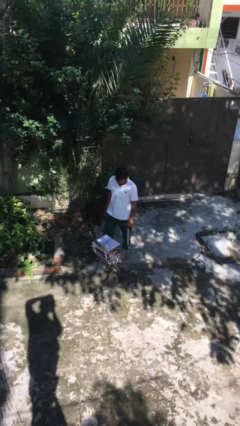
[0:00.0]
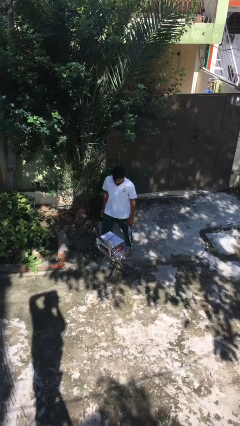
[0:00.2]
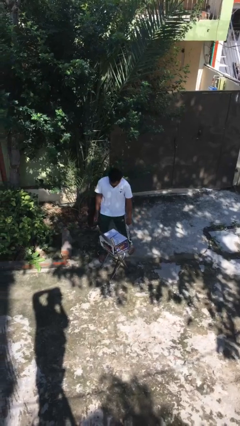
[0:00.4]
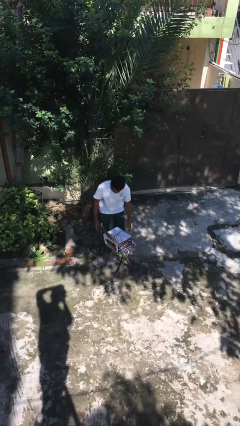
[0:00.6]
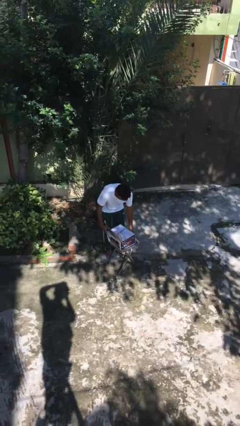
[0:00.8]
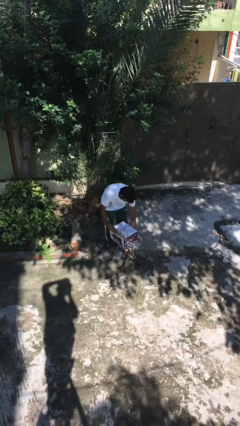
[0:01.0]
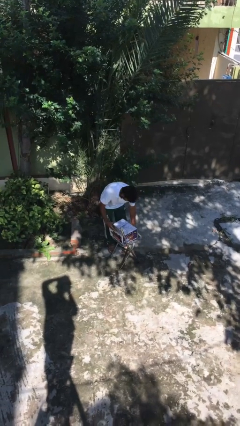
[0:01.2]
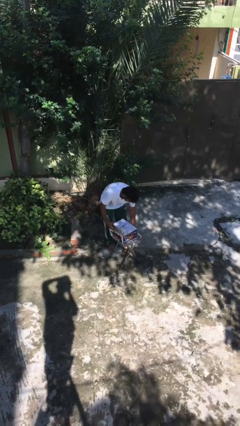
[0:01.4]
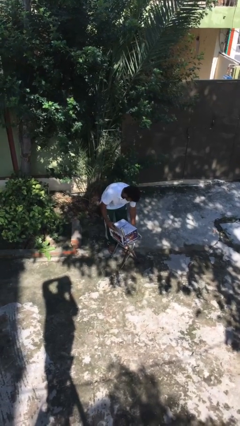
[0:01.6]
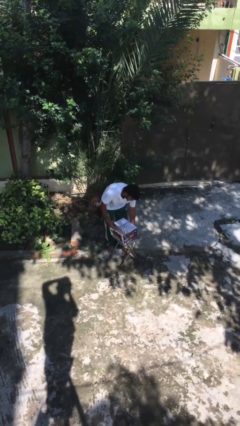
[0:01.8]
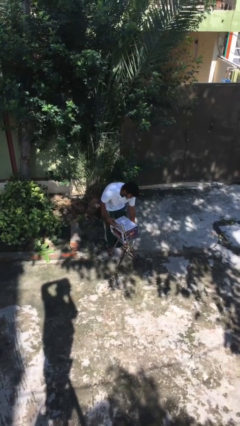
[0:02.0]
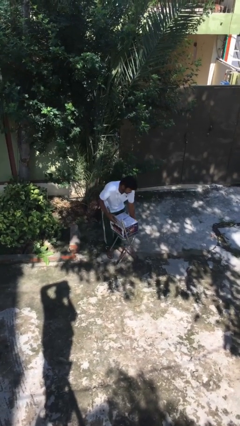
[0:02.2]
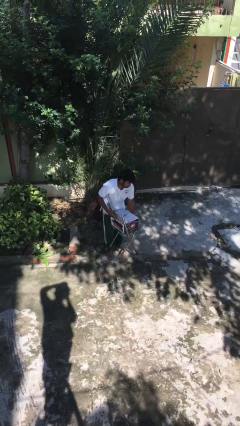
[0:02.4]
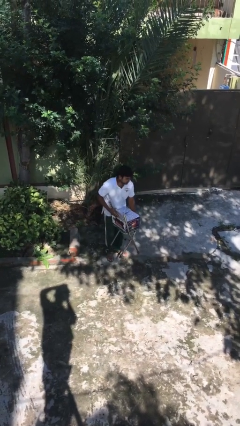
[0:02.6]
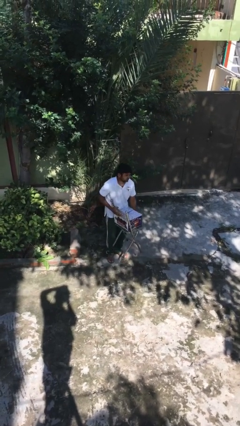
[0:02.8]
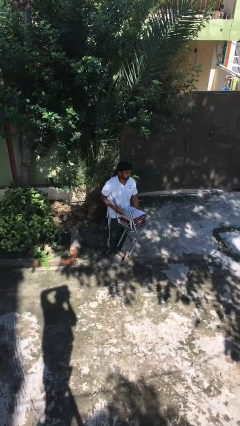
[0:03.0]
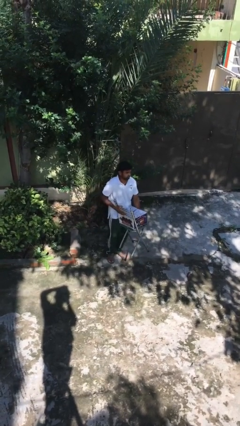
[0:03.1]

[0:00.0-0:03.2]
person picks up object from floor

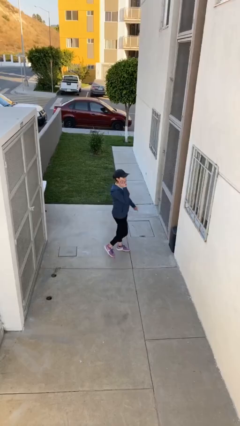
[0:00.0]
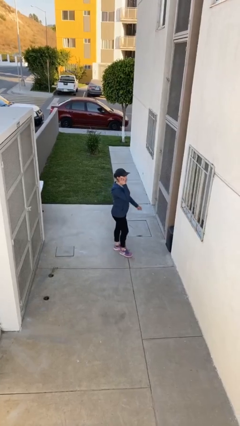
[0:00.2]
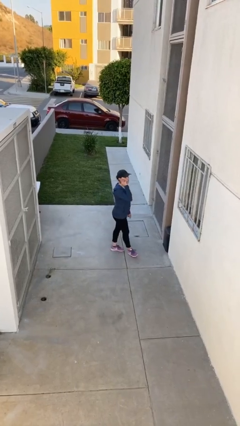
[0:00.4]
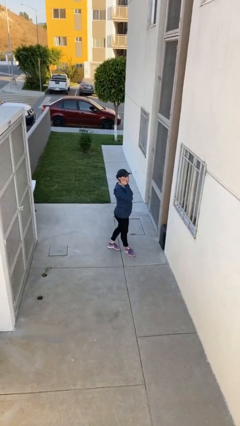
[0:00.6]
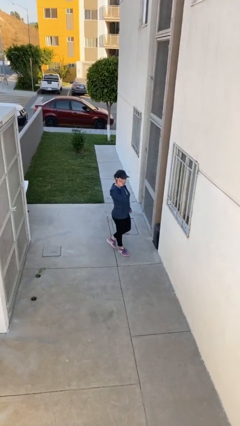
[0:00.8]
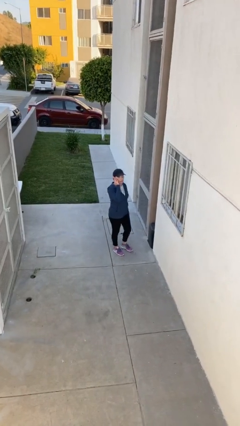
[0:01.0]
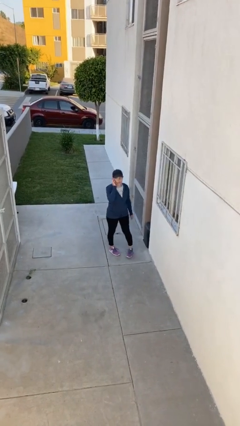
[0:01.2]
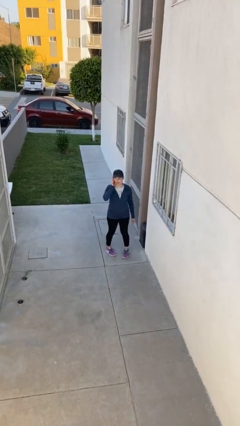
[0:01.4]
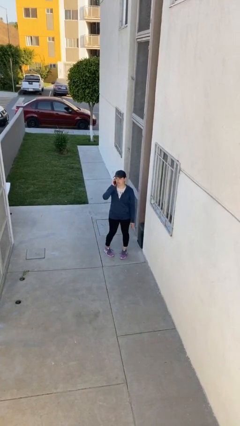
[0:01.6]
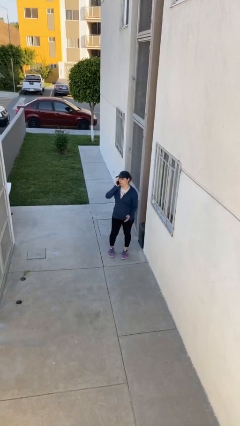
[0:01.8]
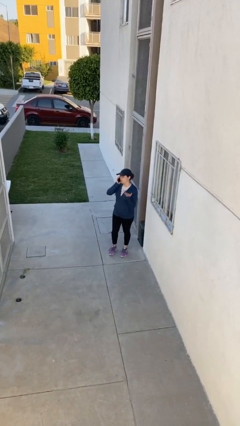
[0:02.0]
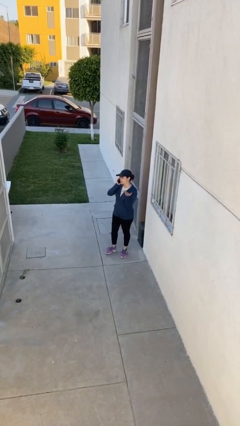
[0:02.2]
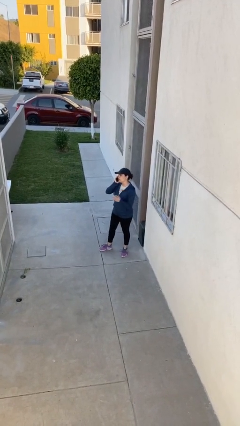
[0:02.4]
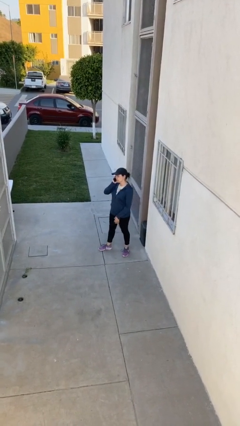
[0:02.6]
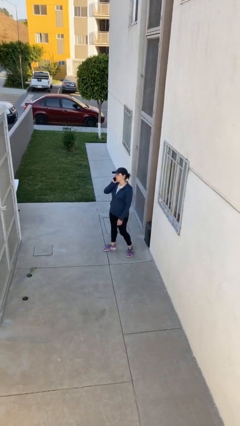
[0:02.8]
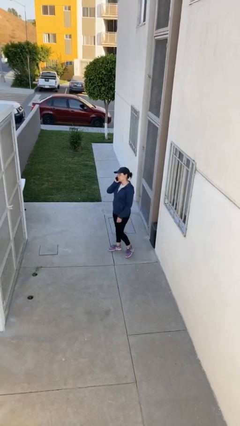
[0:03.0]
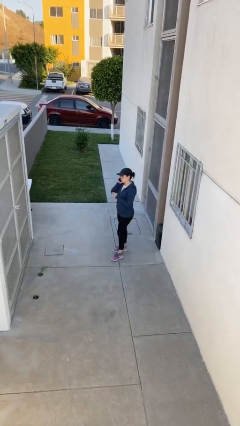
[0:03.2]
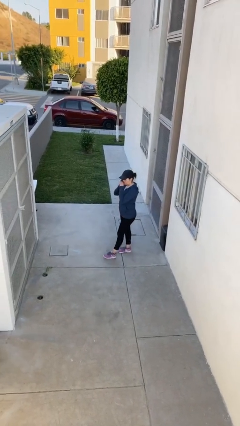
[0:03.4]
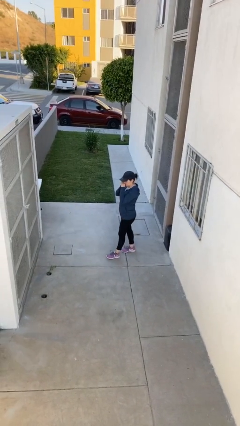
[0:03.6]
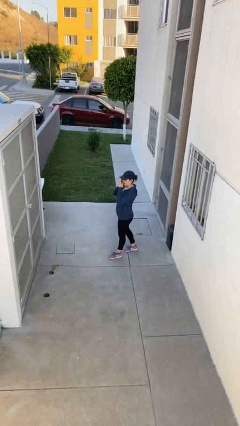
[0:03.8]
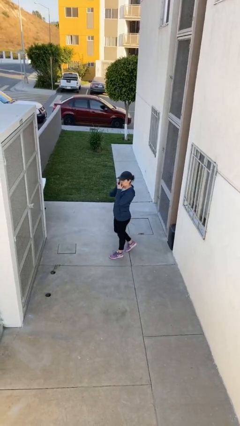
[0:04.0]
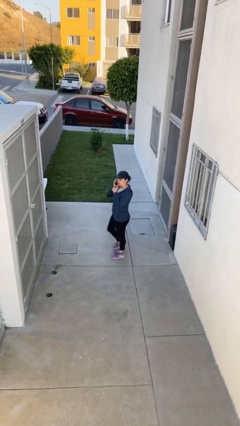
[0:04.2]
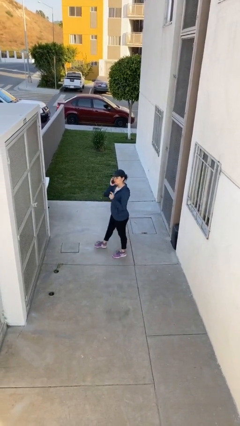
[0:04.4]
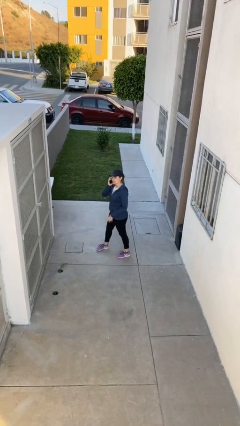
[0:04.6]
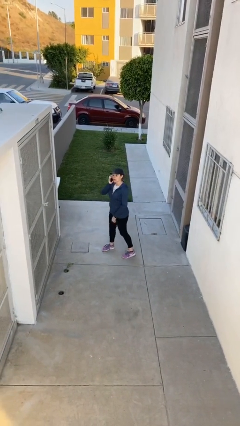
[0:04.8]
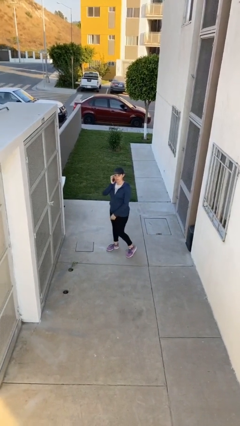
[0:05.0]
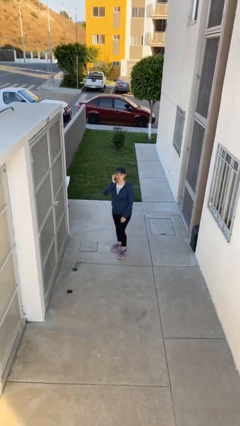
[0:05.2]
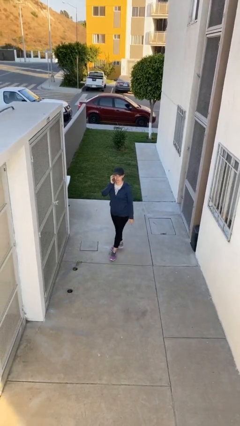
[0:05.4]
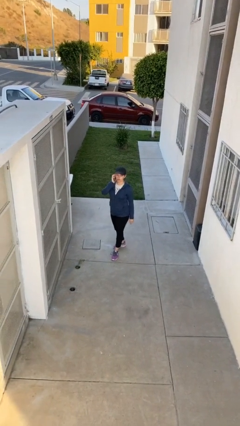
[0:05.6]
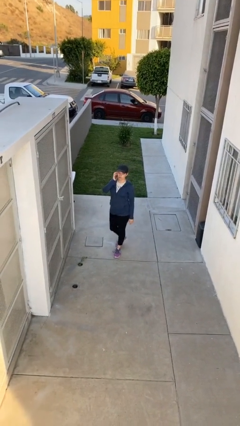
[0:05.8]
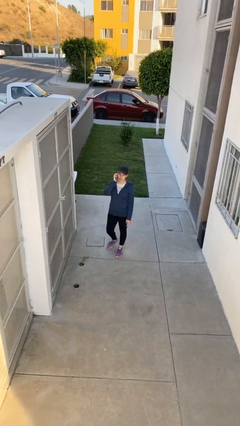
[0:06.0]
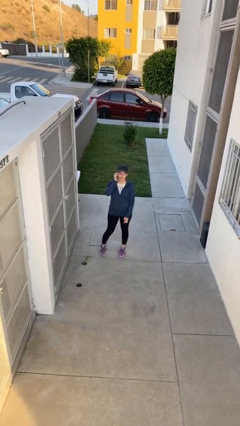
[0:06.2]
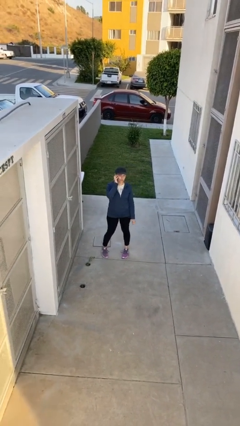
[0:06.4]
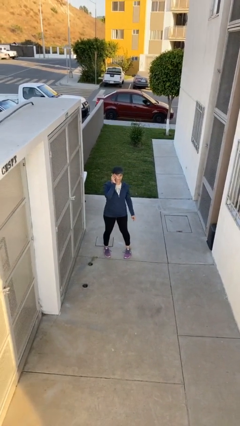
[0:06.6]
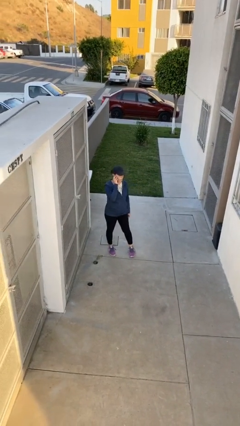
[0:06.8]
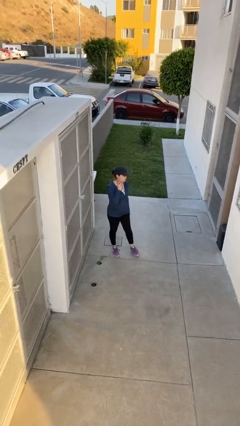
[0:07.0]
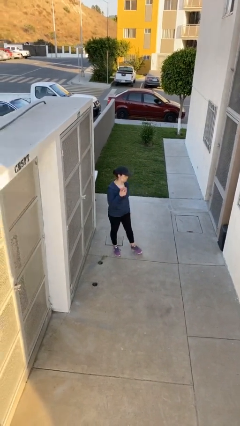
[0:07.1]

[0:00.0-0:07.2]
person talks on phone

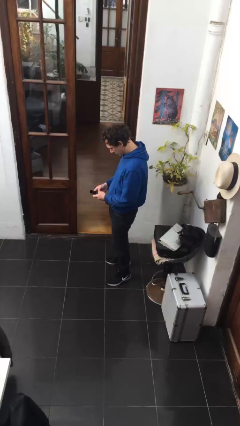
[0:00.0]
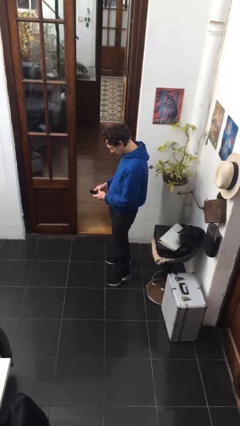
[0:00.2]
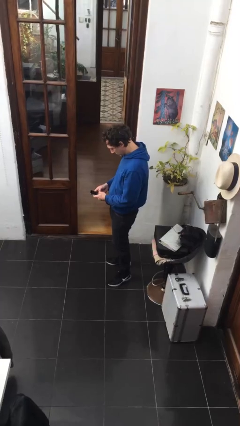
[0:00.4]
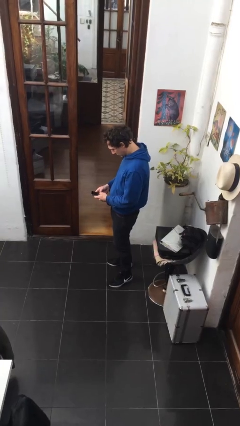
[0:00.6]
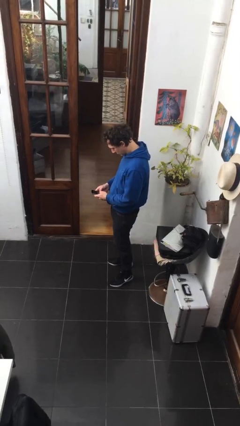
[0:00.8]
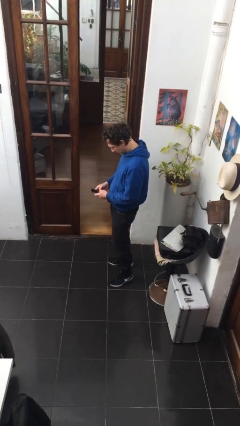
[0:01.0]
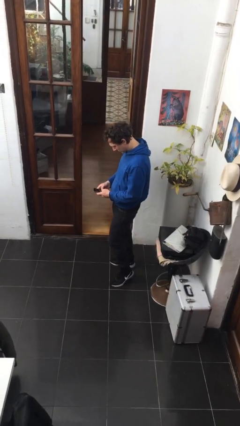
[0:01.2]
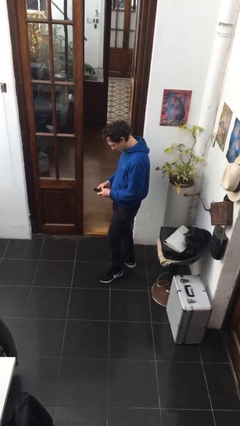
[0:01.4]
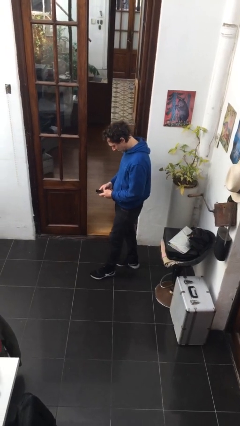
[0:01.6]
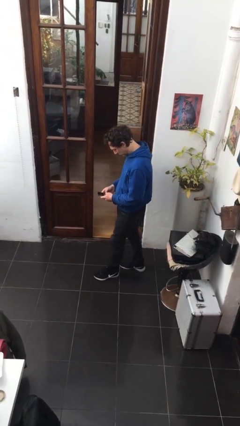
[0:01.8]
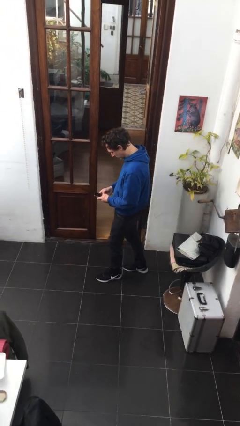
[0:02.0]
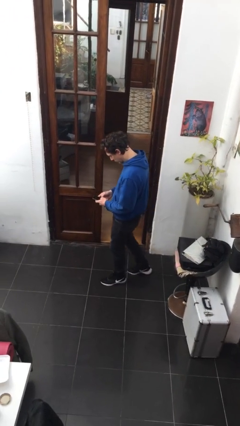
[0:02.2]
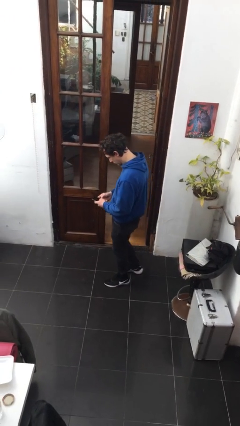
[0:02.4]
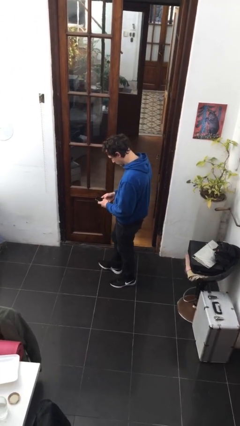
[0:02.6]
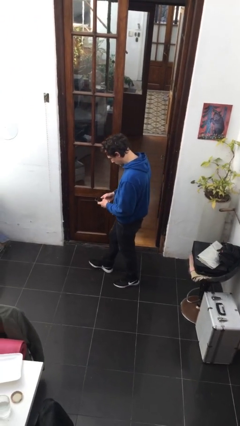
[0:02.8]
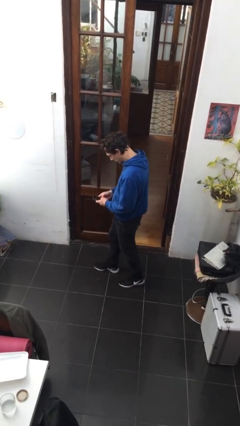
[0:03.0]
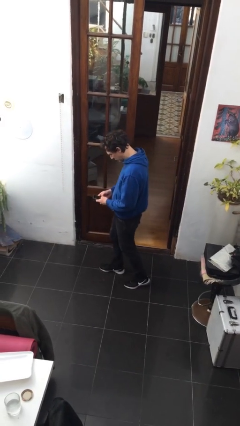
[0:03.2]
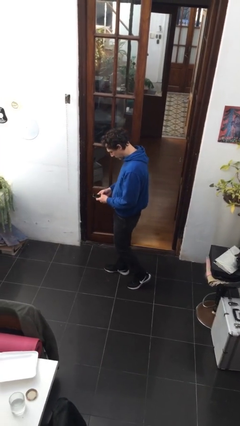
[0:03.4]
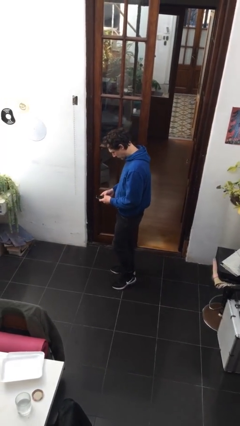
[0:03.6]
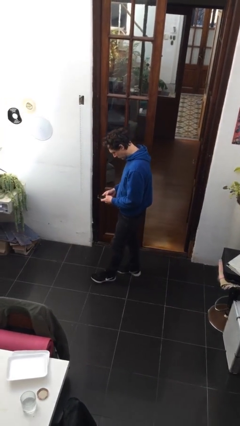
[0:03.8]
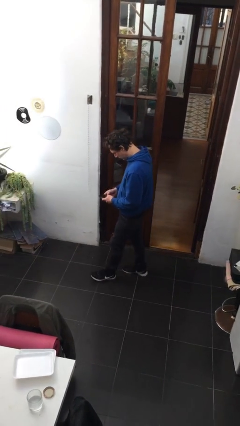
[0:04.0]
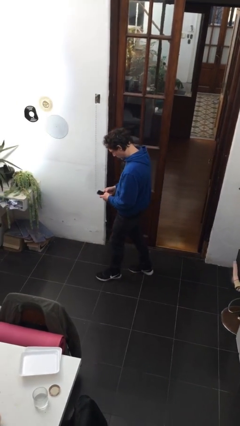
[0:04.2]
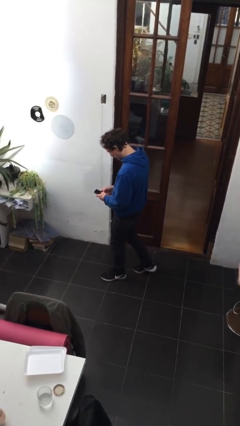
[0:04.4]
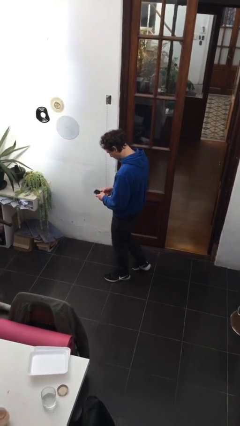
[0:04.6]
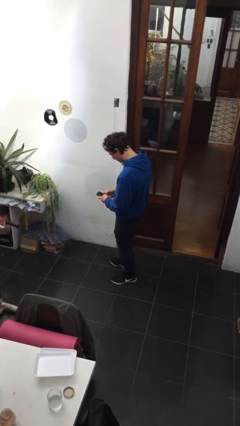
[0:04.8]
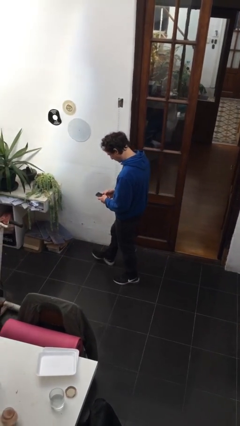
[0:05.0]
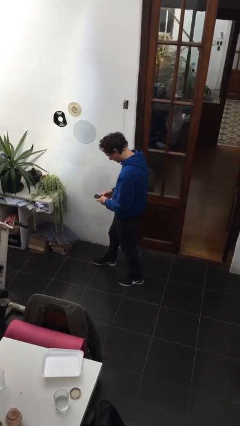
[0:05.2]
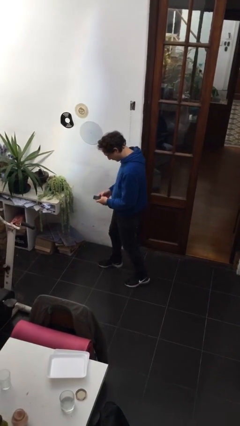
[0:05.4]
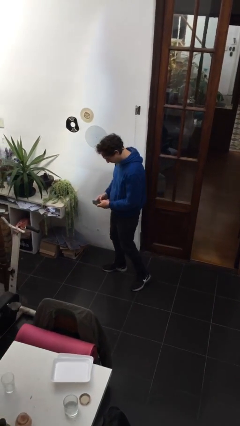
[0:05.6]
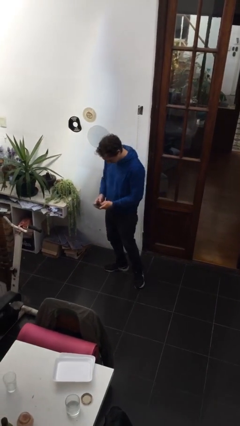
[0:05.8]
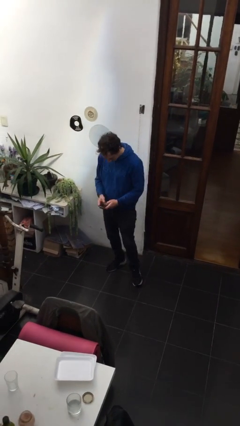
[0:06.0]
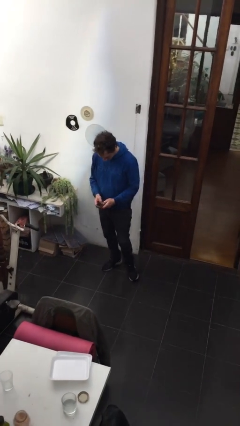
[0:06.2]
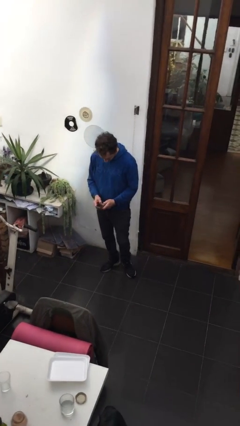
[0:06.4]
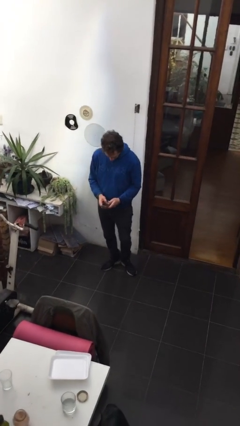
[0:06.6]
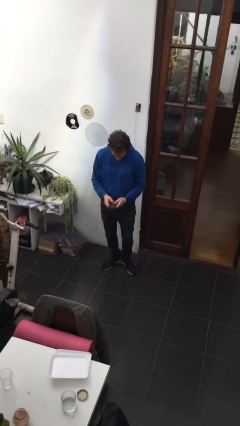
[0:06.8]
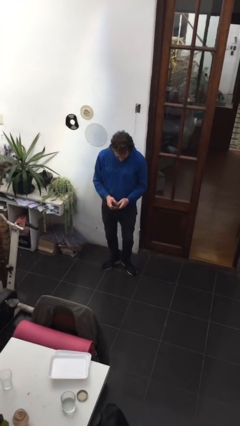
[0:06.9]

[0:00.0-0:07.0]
person texts on phone

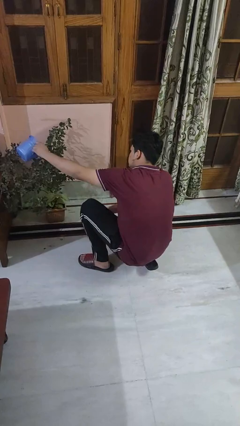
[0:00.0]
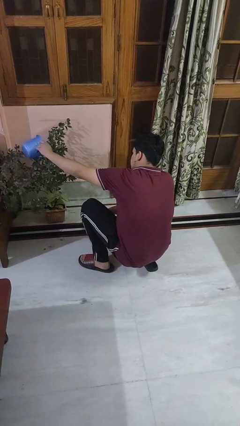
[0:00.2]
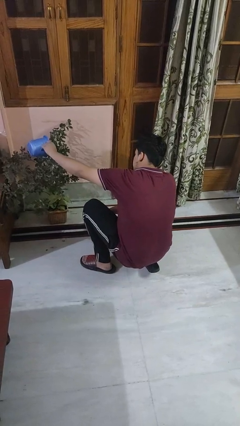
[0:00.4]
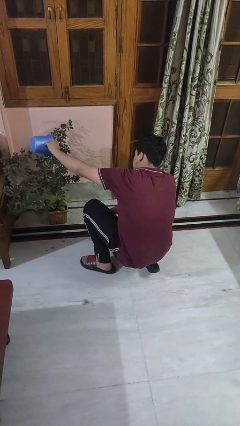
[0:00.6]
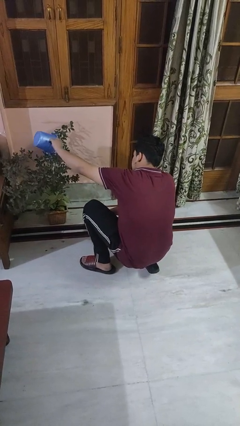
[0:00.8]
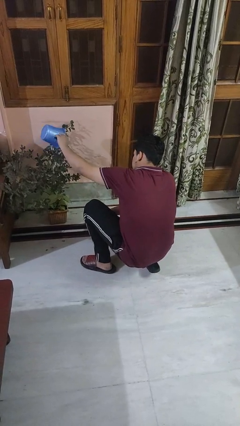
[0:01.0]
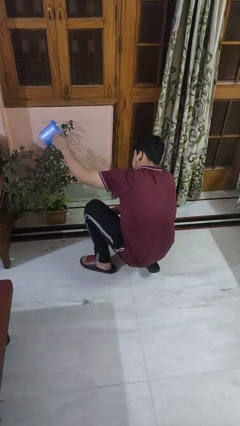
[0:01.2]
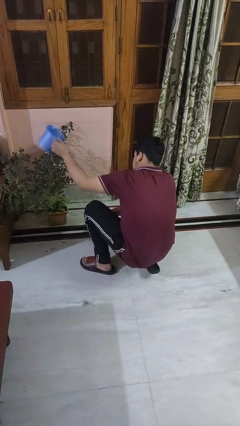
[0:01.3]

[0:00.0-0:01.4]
person waters houseplant
